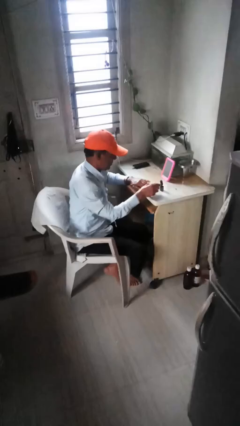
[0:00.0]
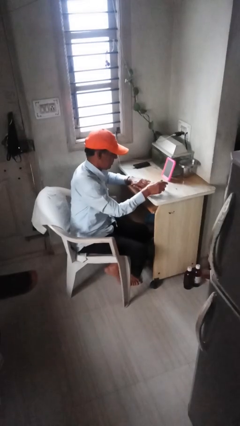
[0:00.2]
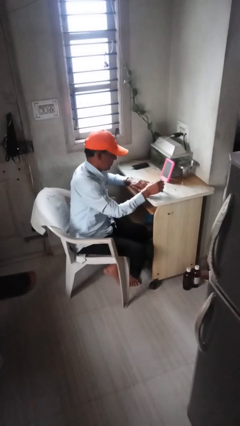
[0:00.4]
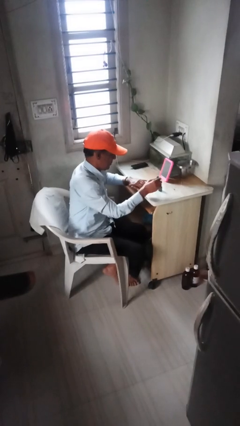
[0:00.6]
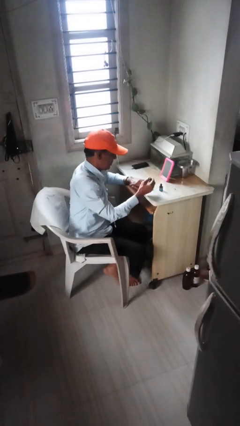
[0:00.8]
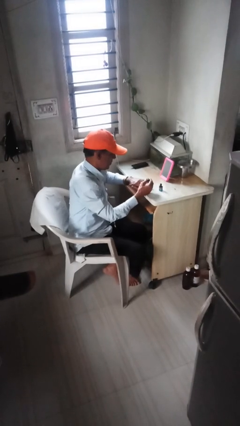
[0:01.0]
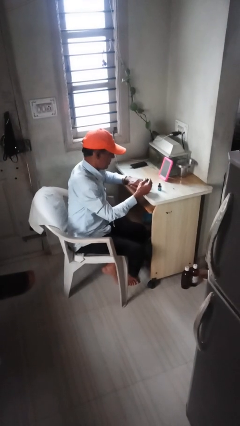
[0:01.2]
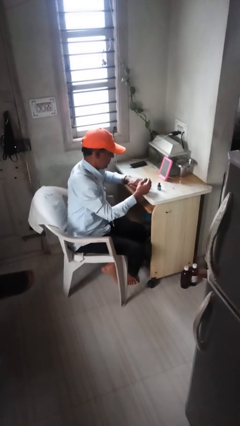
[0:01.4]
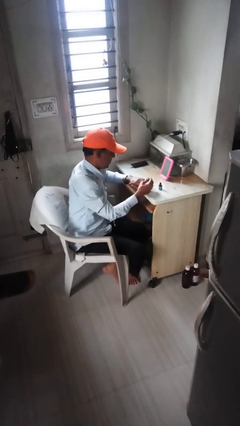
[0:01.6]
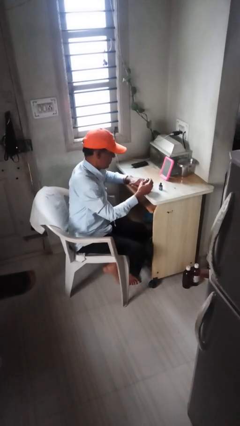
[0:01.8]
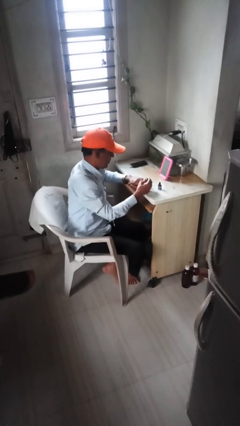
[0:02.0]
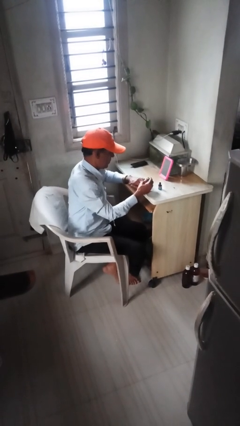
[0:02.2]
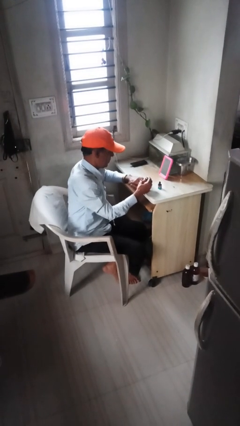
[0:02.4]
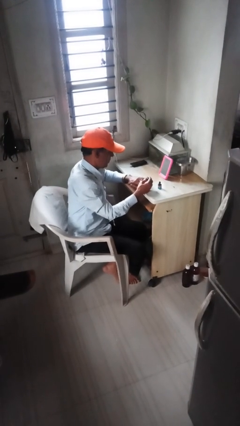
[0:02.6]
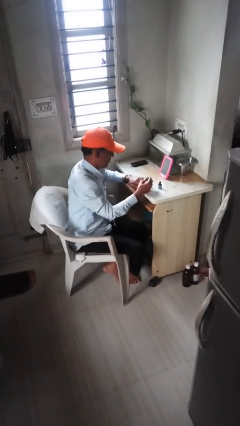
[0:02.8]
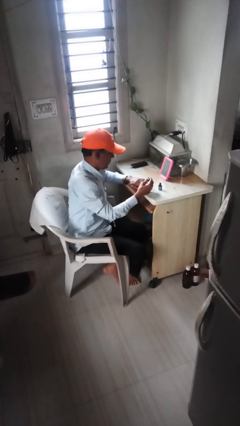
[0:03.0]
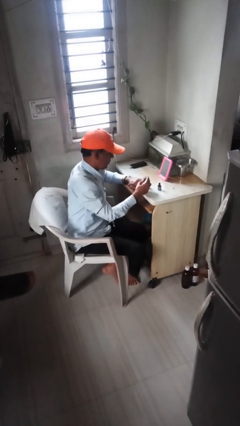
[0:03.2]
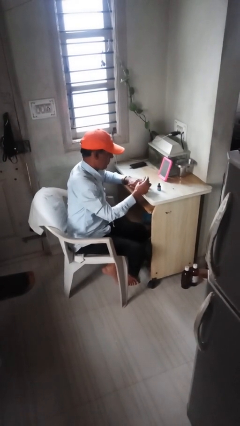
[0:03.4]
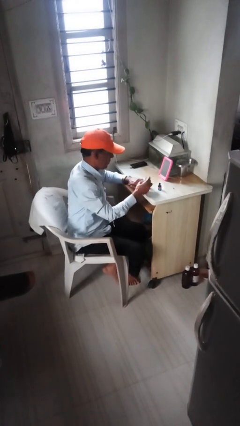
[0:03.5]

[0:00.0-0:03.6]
person paints fingernails

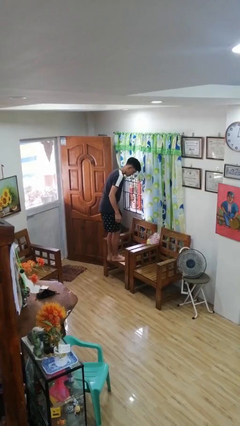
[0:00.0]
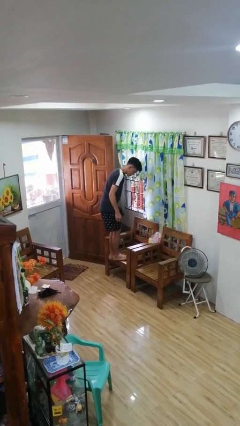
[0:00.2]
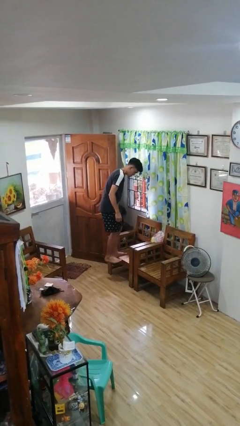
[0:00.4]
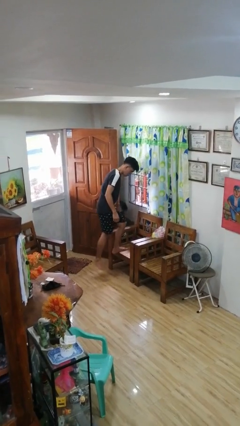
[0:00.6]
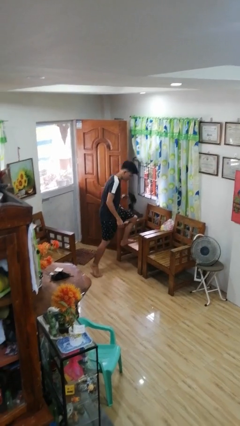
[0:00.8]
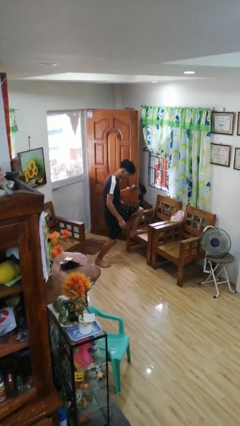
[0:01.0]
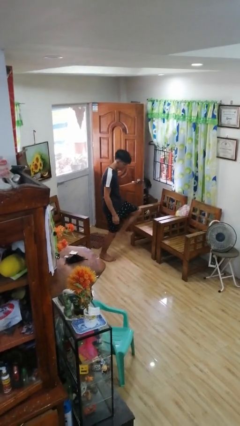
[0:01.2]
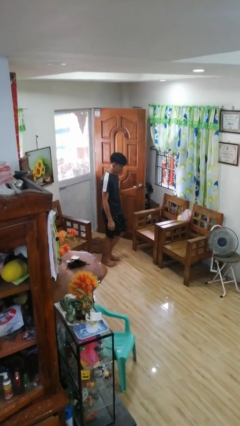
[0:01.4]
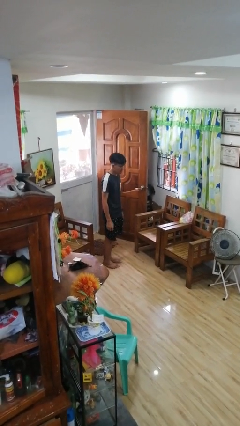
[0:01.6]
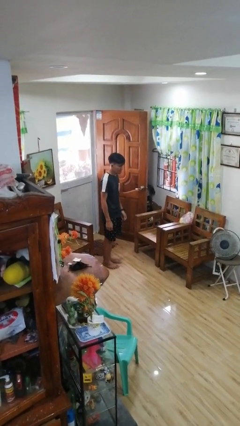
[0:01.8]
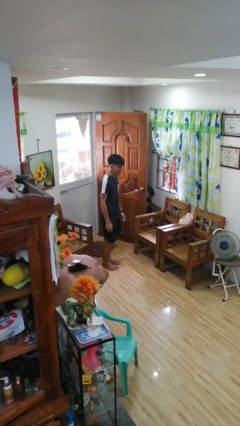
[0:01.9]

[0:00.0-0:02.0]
person climbs off chair

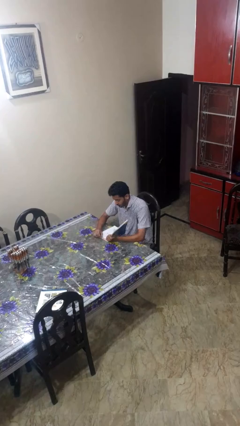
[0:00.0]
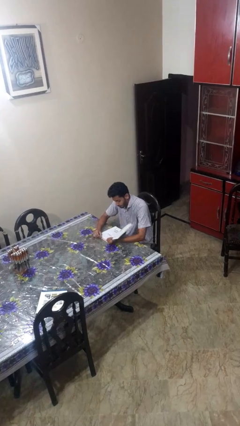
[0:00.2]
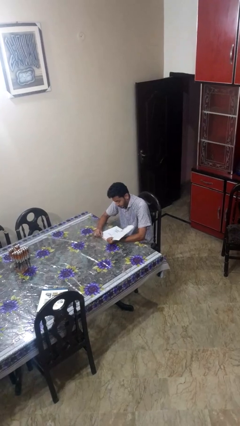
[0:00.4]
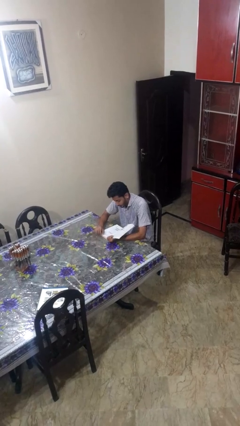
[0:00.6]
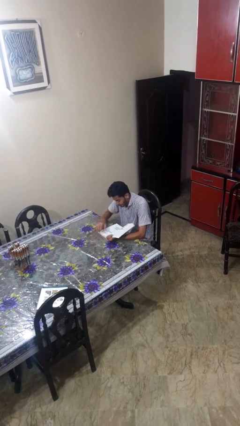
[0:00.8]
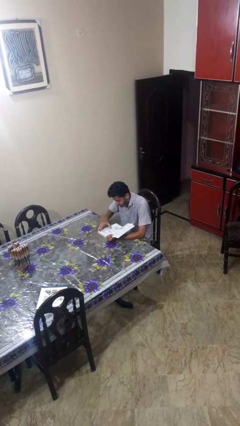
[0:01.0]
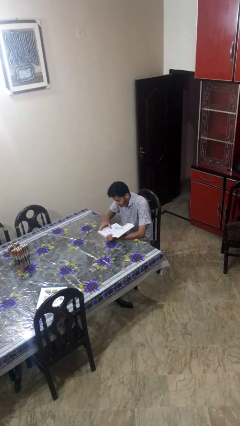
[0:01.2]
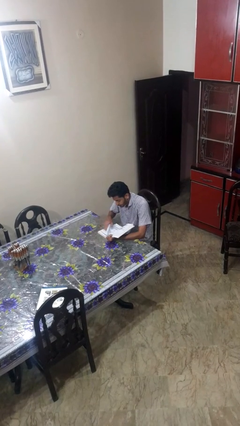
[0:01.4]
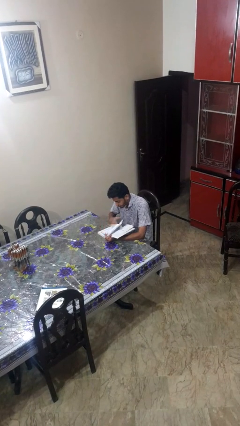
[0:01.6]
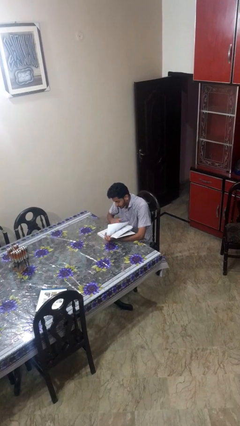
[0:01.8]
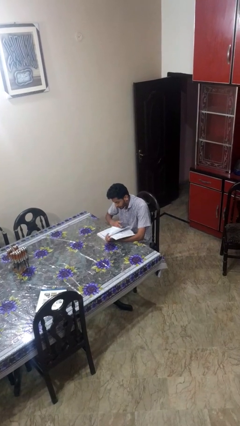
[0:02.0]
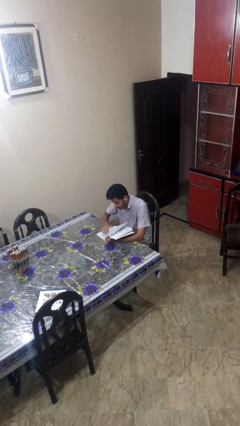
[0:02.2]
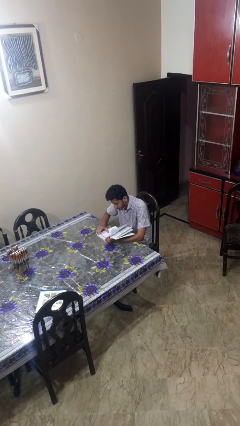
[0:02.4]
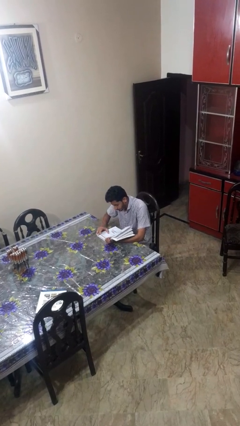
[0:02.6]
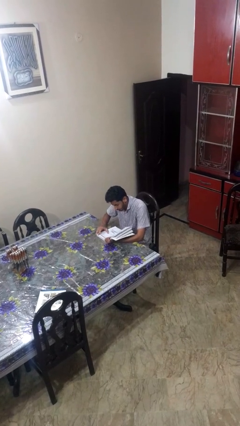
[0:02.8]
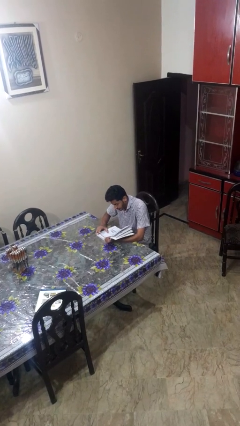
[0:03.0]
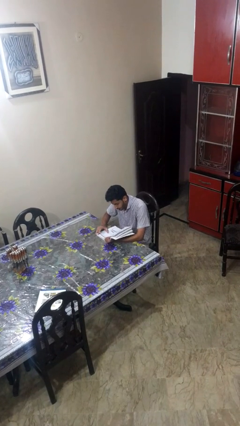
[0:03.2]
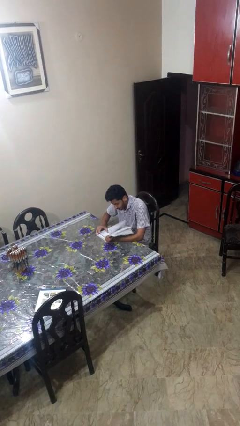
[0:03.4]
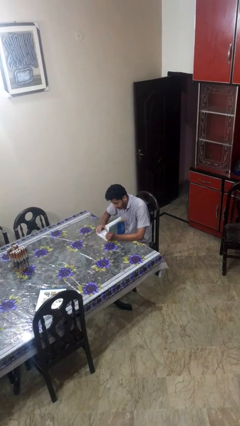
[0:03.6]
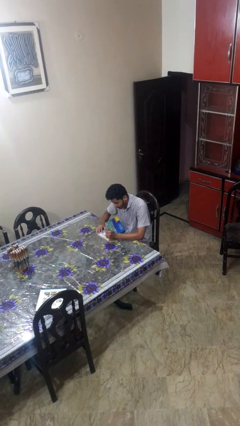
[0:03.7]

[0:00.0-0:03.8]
person reads book

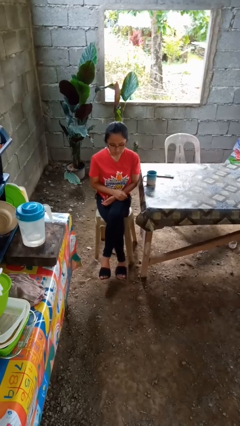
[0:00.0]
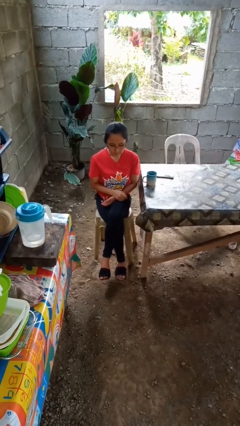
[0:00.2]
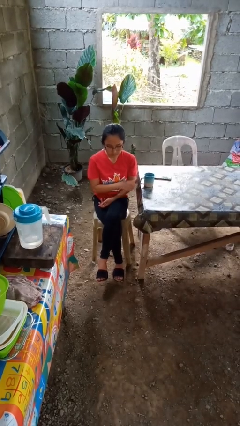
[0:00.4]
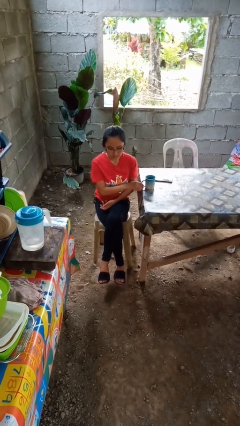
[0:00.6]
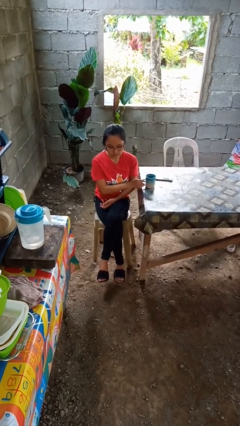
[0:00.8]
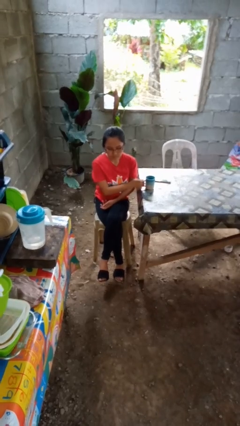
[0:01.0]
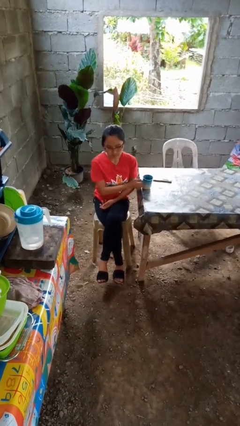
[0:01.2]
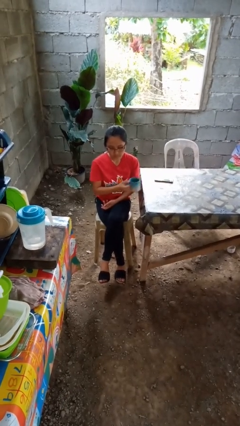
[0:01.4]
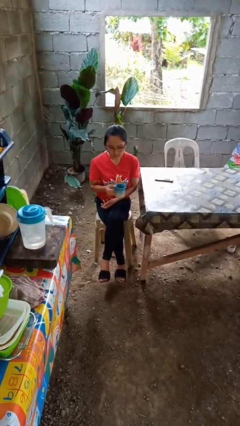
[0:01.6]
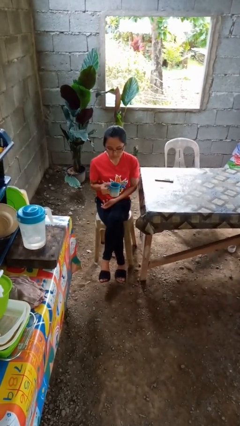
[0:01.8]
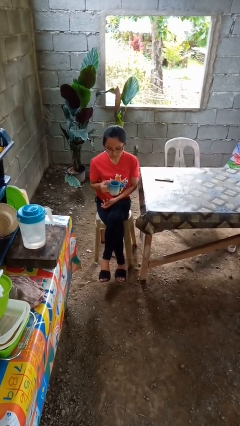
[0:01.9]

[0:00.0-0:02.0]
person picks up object from table

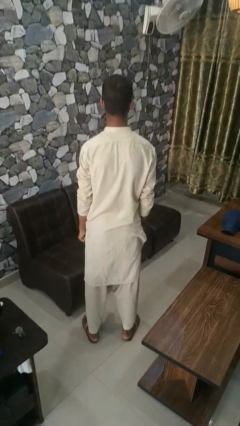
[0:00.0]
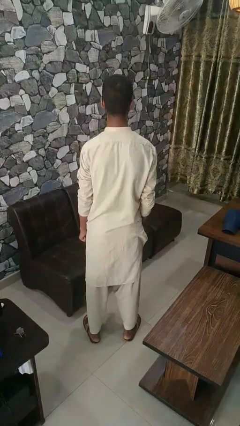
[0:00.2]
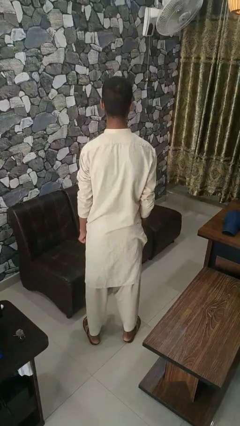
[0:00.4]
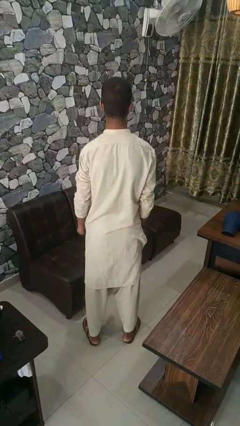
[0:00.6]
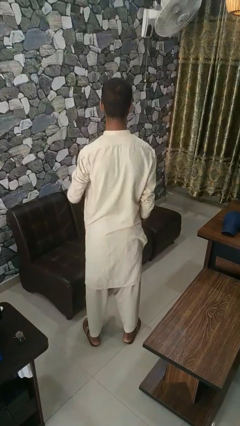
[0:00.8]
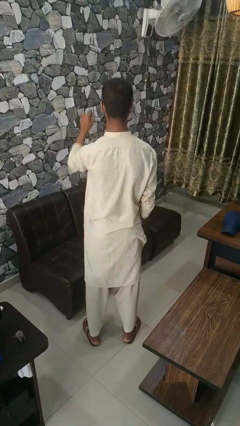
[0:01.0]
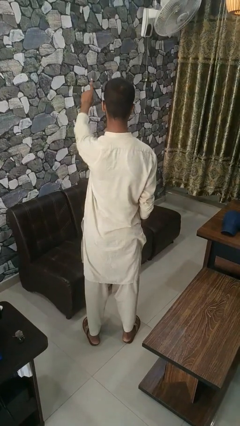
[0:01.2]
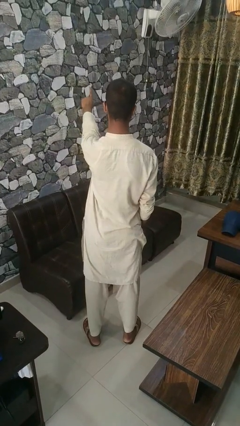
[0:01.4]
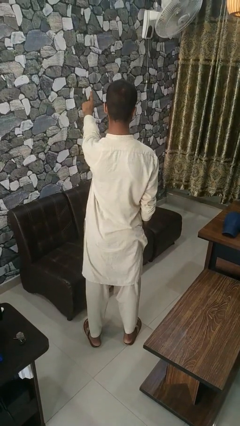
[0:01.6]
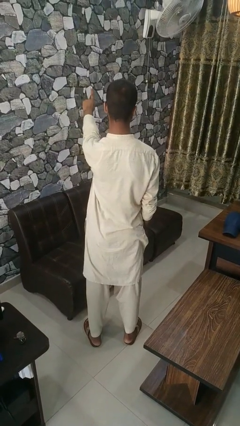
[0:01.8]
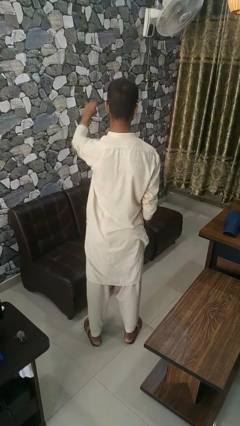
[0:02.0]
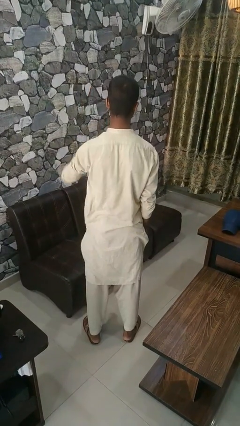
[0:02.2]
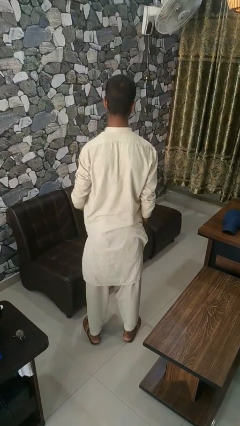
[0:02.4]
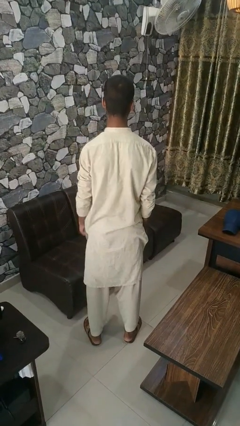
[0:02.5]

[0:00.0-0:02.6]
person gestures number one

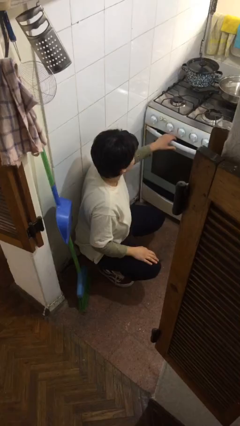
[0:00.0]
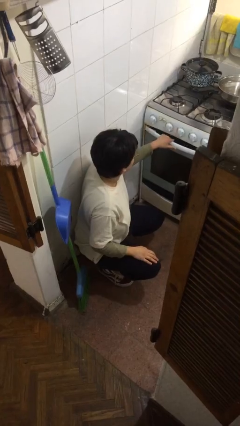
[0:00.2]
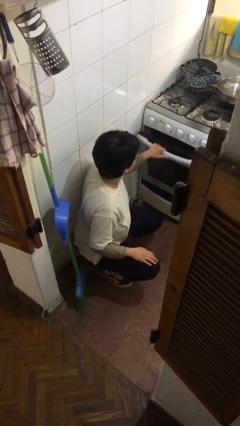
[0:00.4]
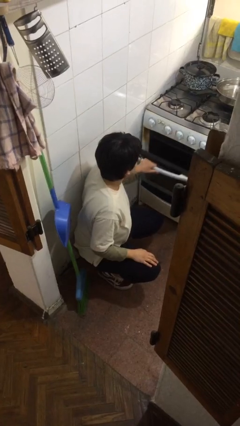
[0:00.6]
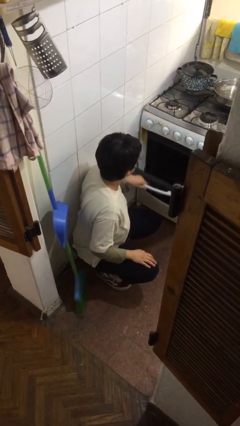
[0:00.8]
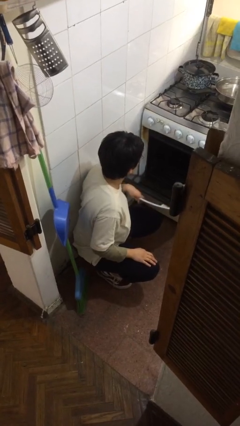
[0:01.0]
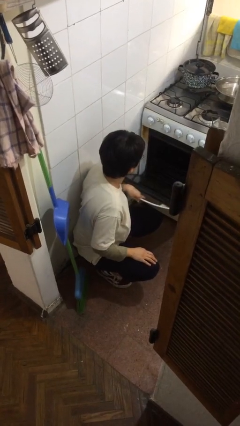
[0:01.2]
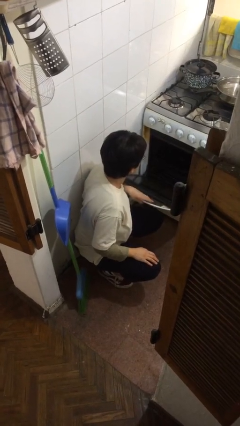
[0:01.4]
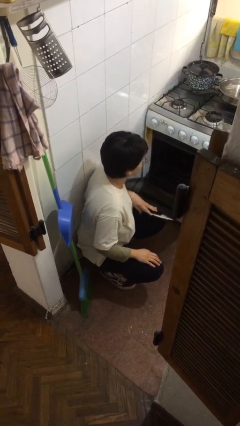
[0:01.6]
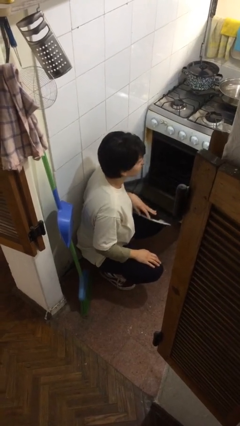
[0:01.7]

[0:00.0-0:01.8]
person opens oven door

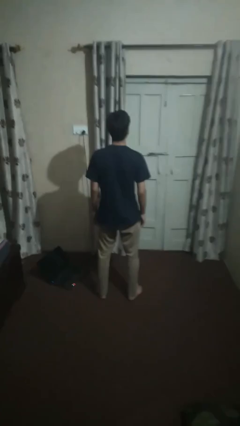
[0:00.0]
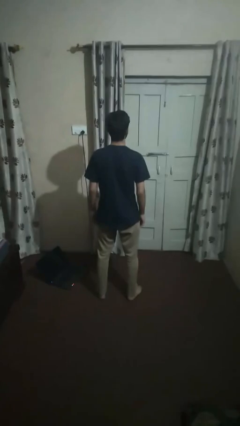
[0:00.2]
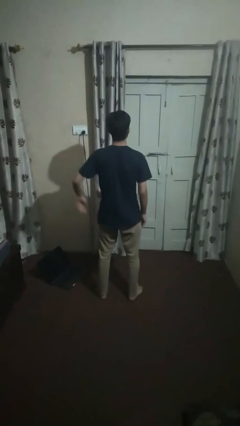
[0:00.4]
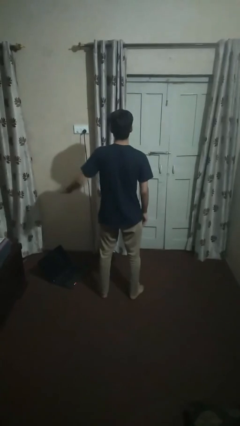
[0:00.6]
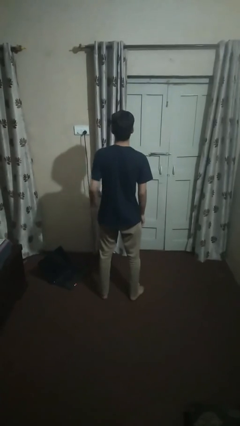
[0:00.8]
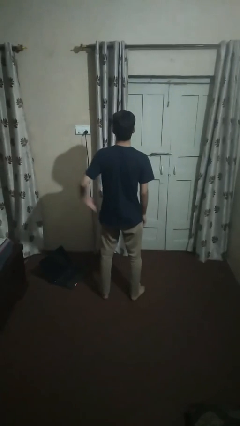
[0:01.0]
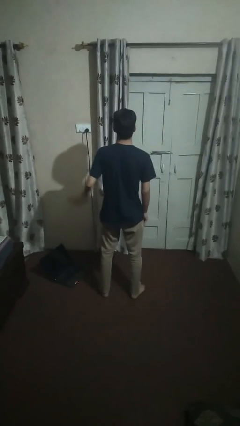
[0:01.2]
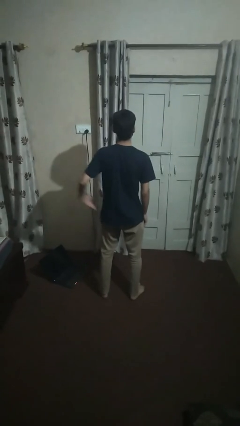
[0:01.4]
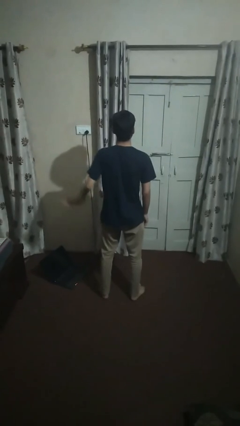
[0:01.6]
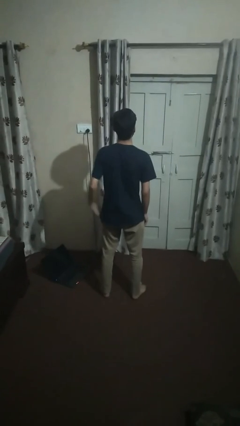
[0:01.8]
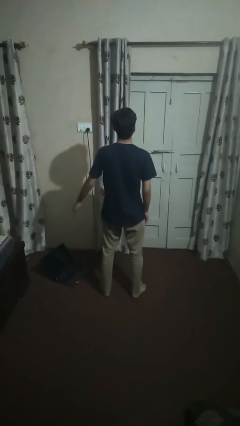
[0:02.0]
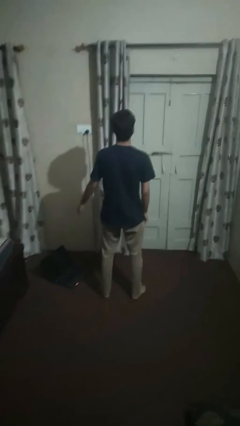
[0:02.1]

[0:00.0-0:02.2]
person slaps hands on thighs
